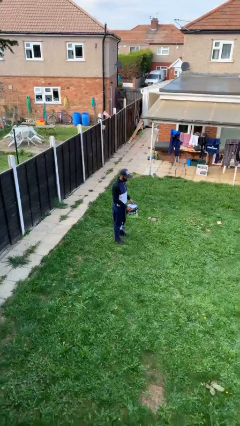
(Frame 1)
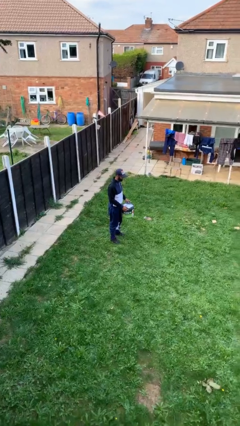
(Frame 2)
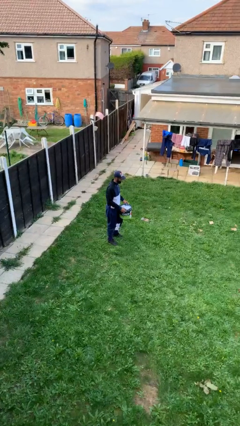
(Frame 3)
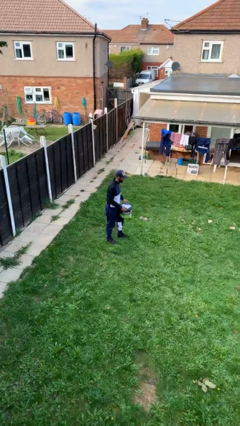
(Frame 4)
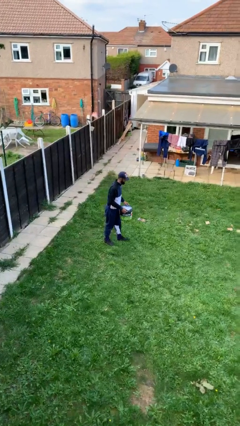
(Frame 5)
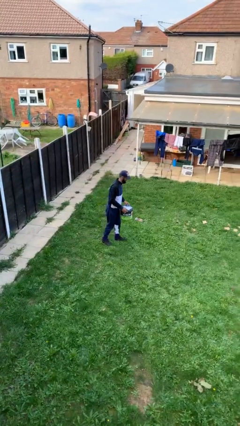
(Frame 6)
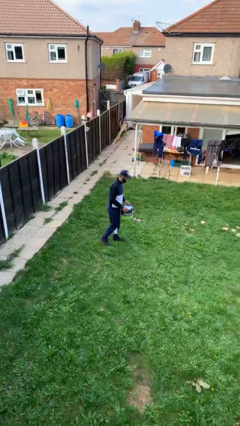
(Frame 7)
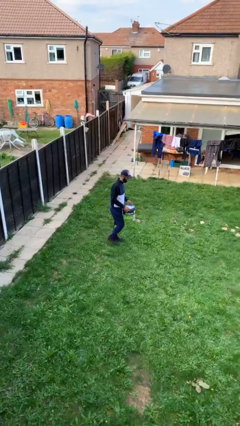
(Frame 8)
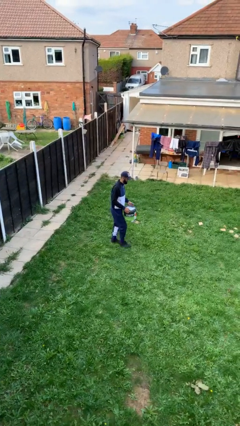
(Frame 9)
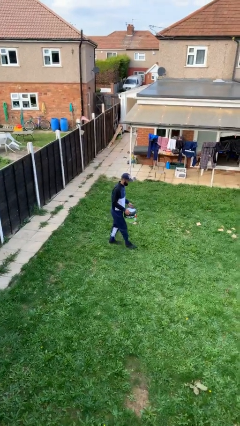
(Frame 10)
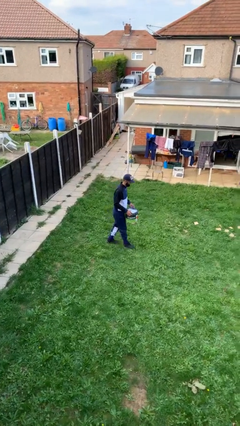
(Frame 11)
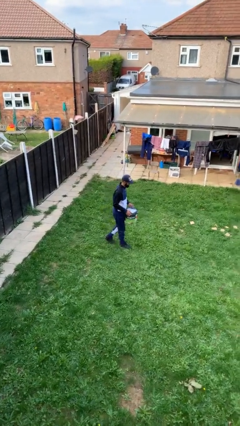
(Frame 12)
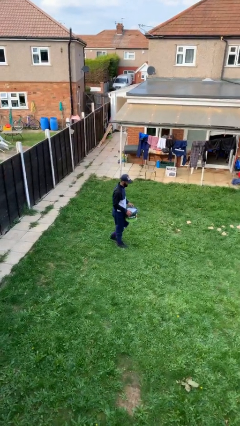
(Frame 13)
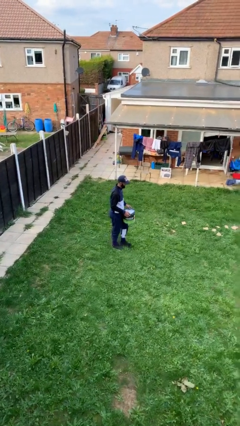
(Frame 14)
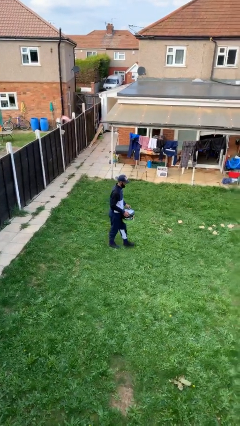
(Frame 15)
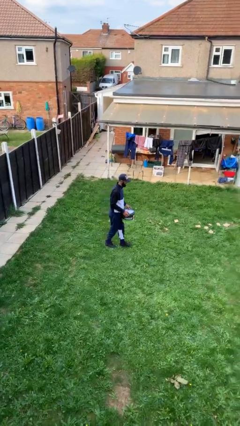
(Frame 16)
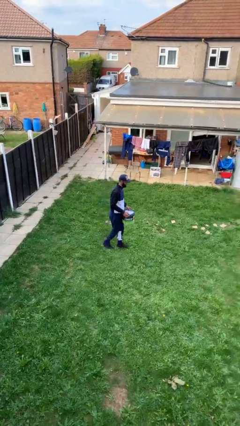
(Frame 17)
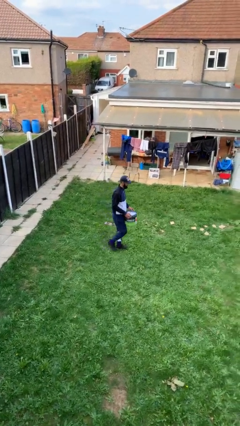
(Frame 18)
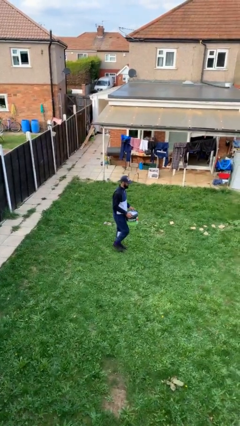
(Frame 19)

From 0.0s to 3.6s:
person carries heavy object

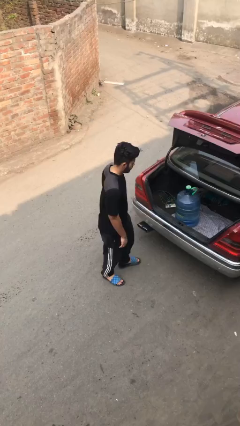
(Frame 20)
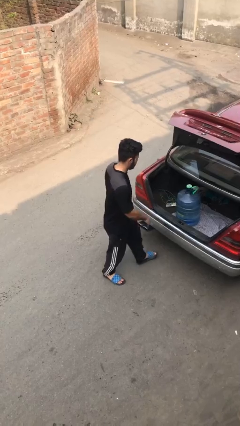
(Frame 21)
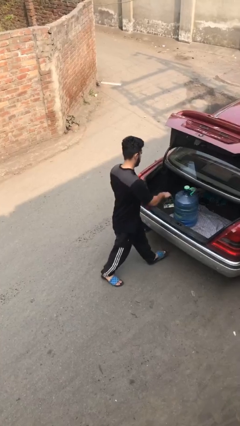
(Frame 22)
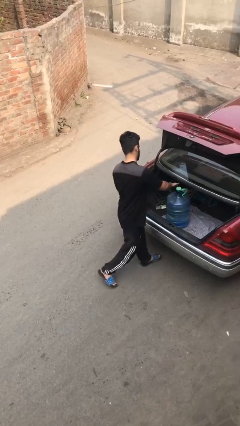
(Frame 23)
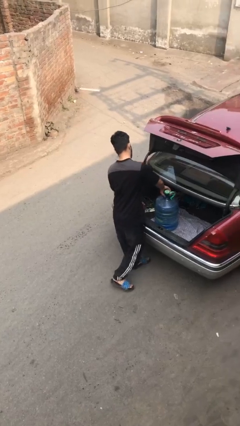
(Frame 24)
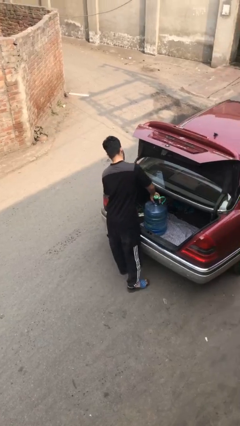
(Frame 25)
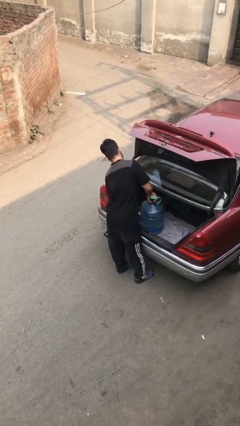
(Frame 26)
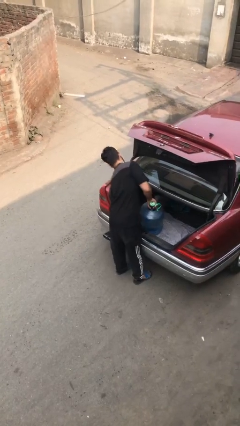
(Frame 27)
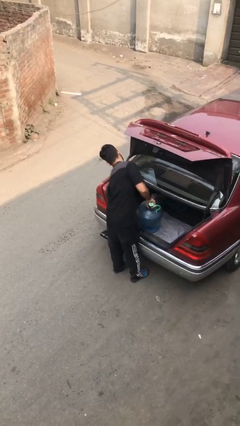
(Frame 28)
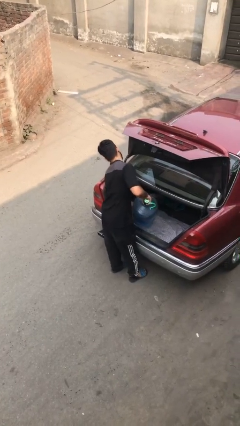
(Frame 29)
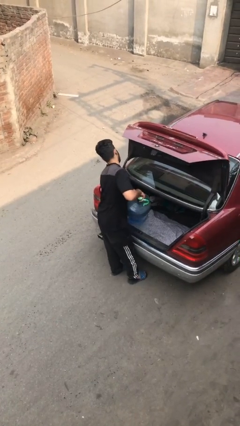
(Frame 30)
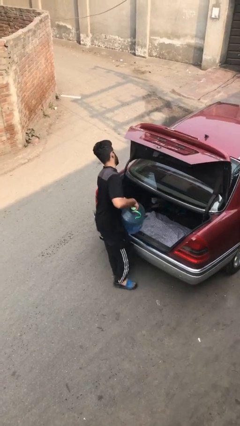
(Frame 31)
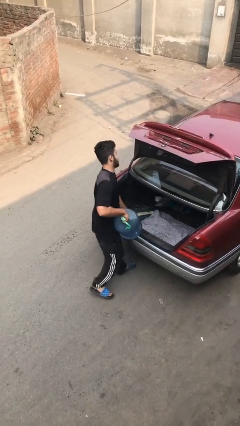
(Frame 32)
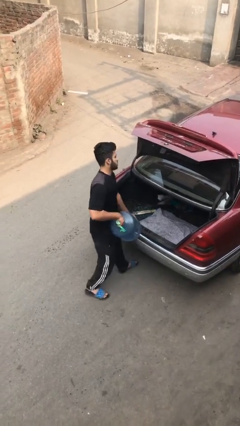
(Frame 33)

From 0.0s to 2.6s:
person unloads car

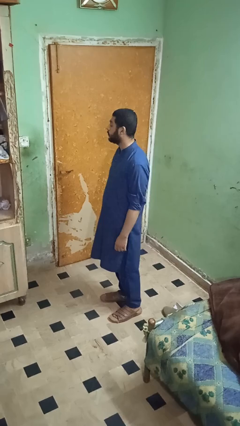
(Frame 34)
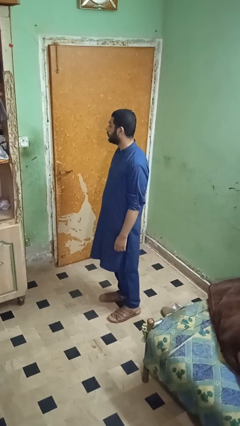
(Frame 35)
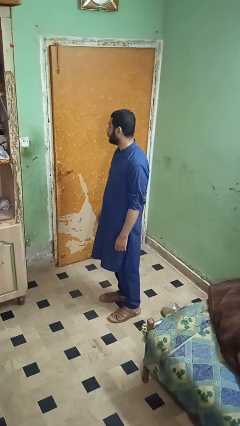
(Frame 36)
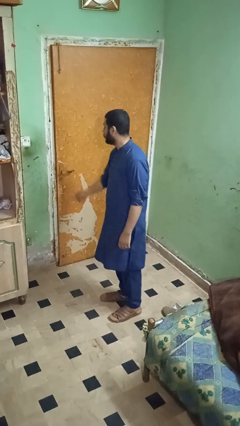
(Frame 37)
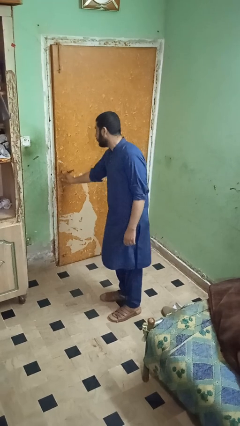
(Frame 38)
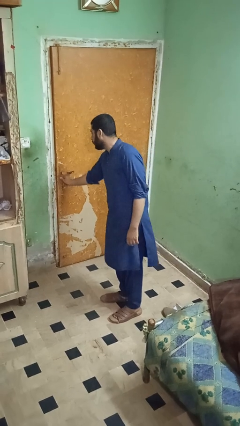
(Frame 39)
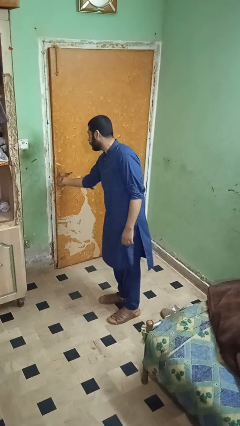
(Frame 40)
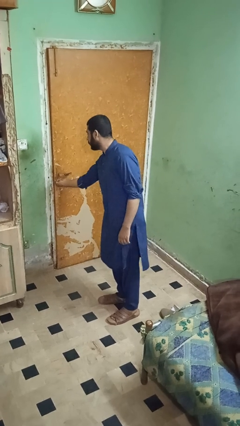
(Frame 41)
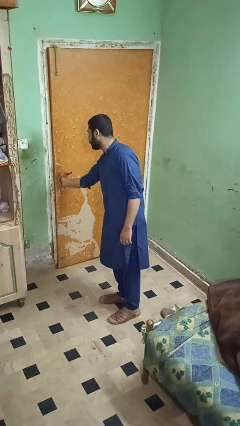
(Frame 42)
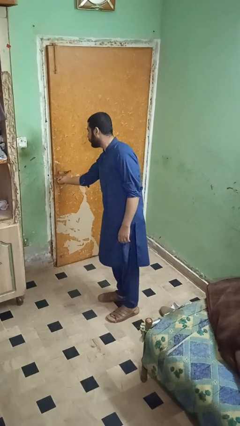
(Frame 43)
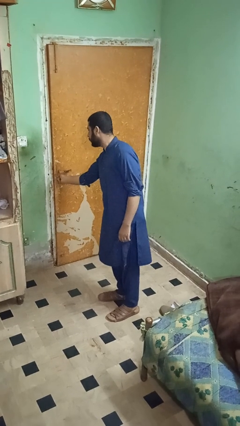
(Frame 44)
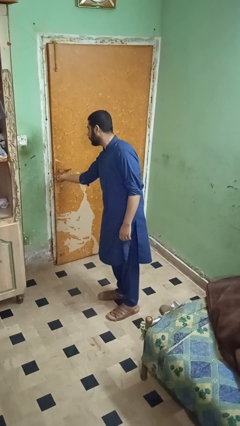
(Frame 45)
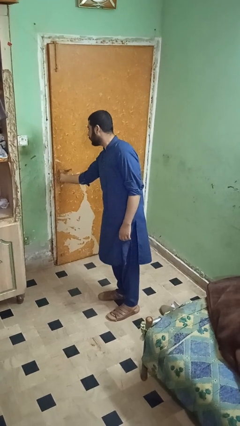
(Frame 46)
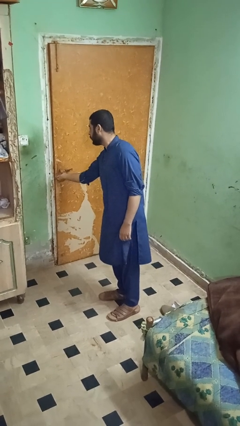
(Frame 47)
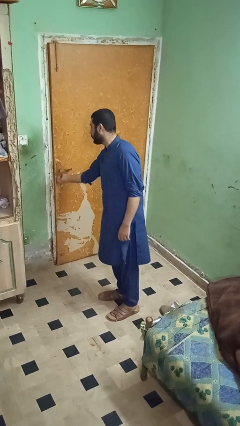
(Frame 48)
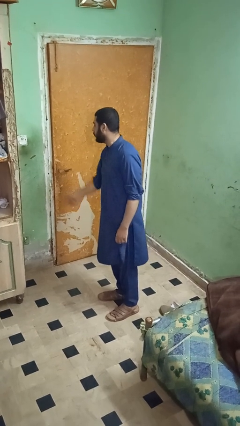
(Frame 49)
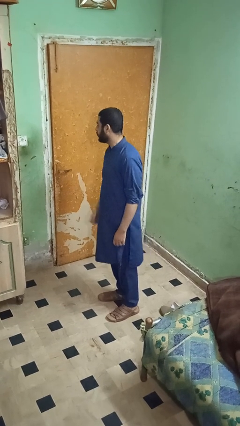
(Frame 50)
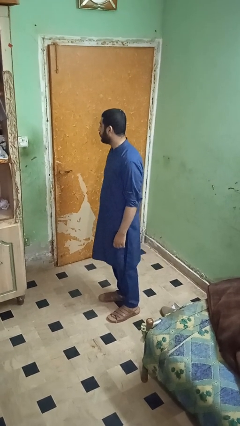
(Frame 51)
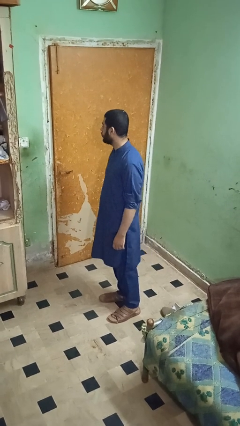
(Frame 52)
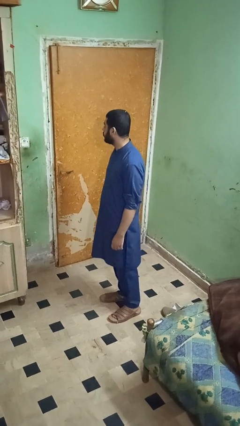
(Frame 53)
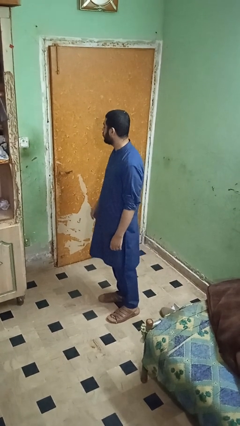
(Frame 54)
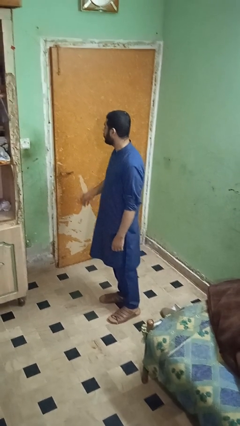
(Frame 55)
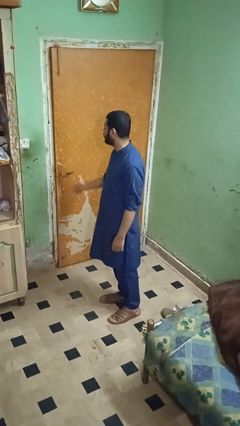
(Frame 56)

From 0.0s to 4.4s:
person unlocks door with keys

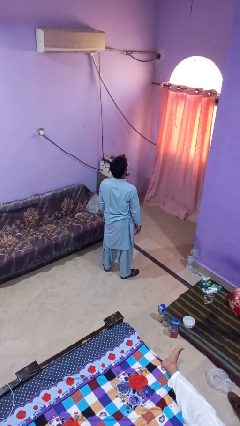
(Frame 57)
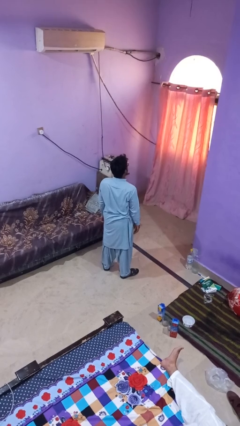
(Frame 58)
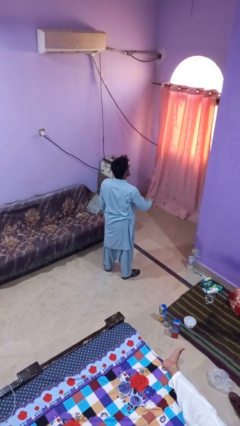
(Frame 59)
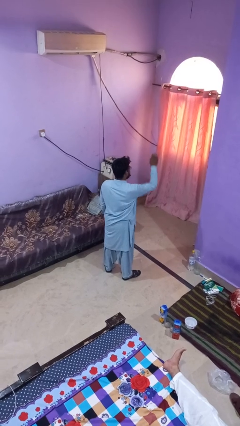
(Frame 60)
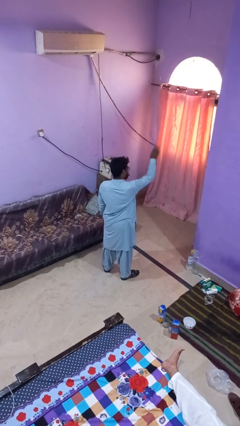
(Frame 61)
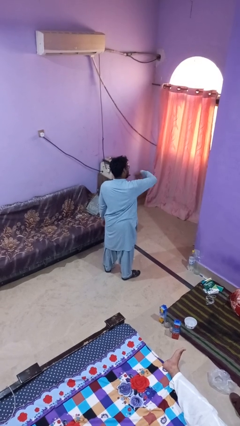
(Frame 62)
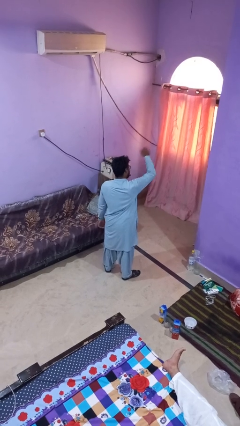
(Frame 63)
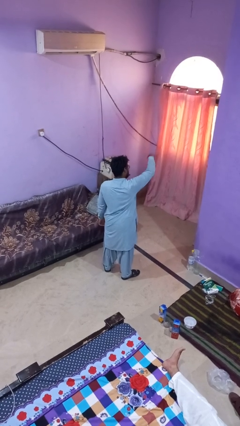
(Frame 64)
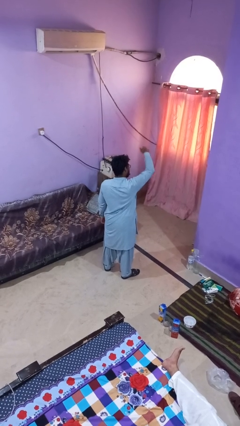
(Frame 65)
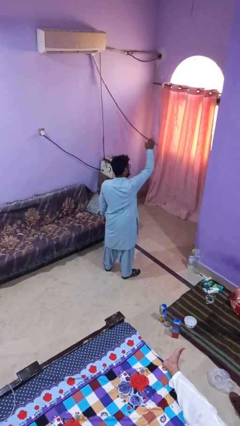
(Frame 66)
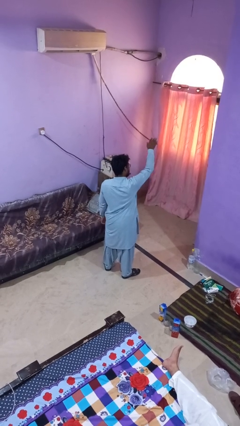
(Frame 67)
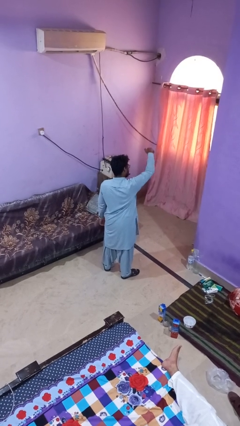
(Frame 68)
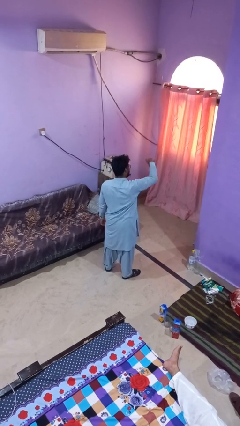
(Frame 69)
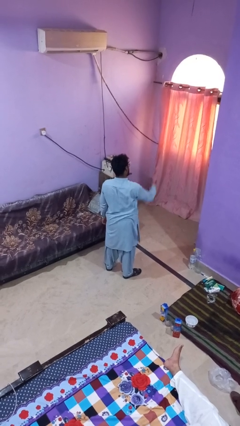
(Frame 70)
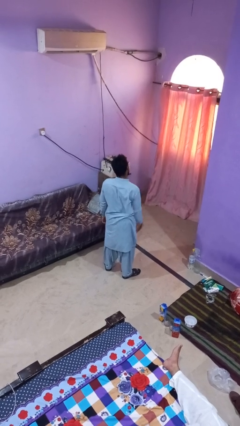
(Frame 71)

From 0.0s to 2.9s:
person gestures come here

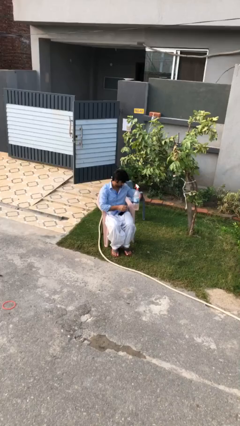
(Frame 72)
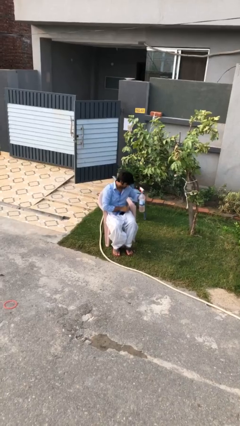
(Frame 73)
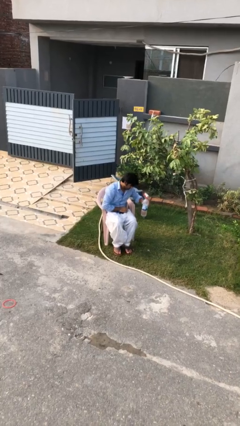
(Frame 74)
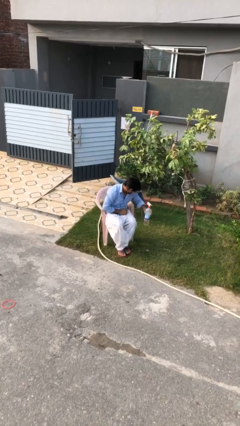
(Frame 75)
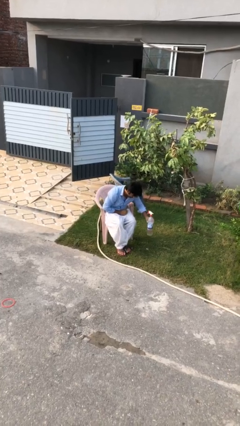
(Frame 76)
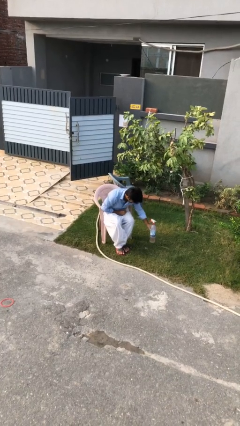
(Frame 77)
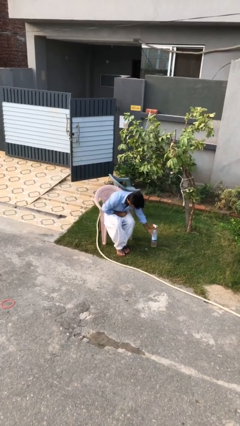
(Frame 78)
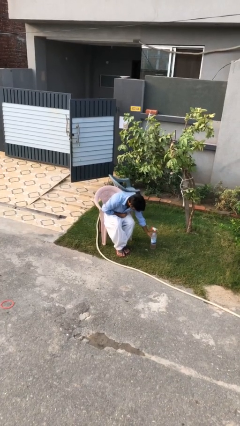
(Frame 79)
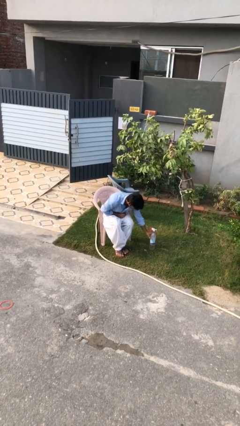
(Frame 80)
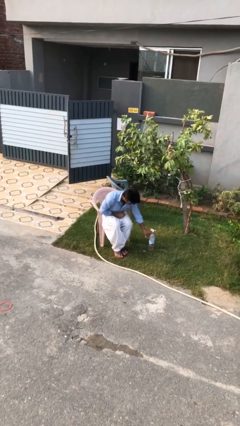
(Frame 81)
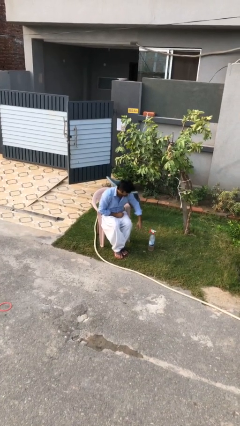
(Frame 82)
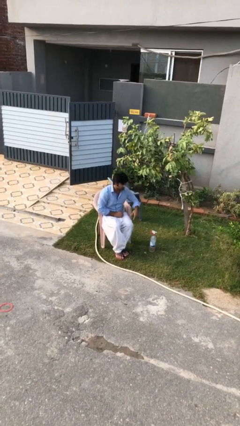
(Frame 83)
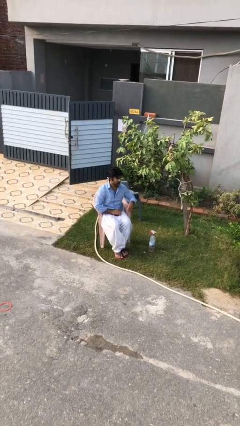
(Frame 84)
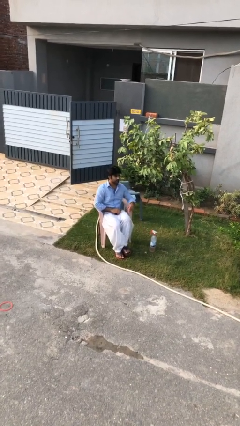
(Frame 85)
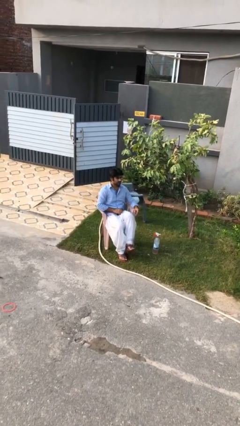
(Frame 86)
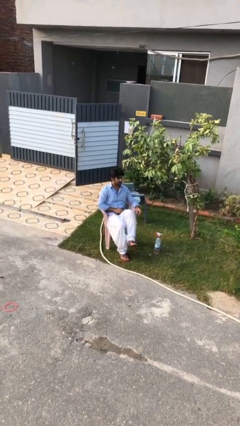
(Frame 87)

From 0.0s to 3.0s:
person puts down object on floor

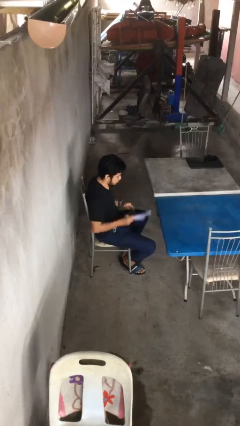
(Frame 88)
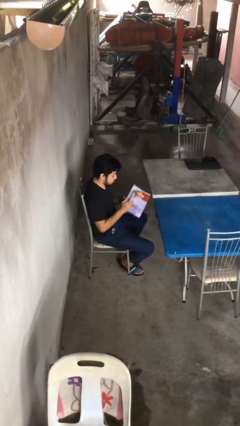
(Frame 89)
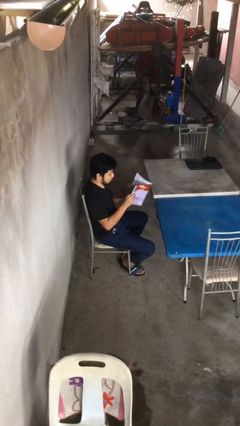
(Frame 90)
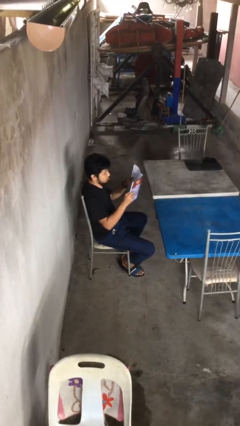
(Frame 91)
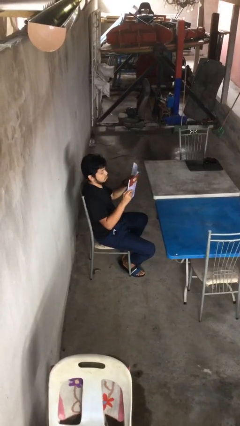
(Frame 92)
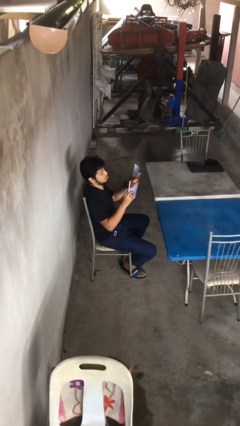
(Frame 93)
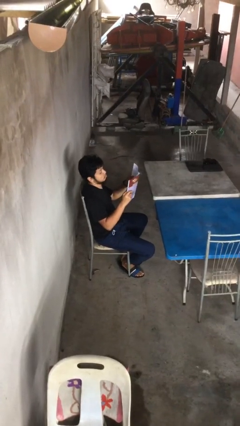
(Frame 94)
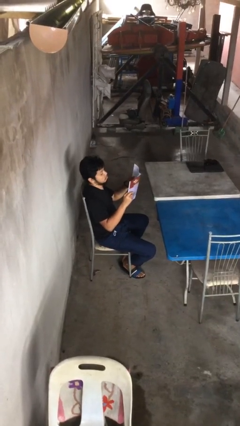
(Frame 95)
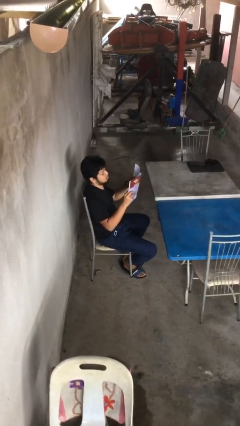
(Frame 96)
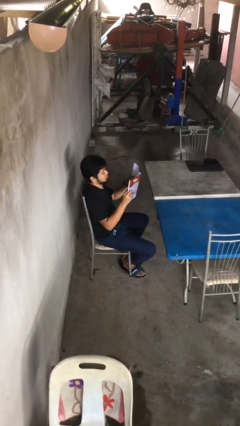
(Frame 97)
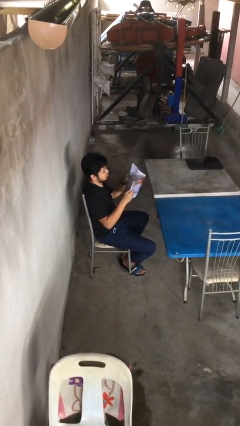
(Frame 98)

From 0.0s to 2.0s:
person reads magazine
